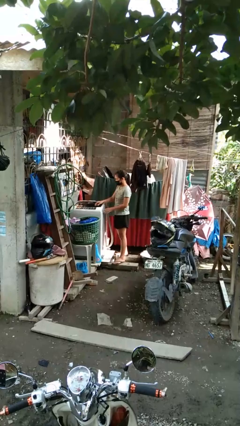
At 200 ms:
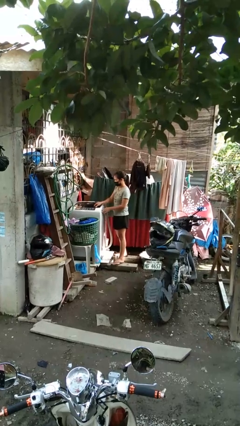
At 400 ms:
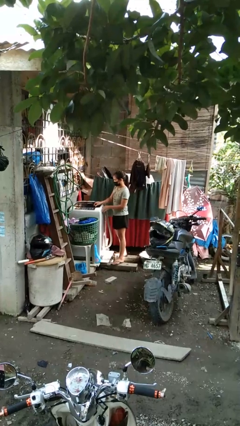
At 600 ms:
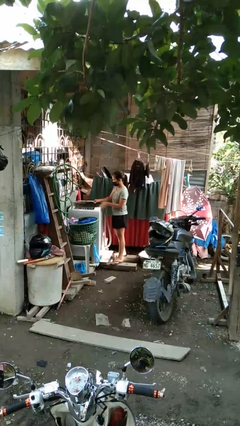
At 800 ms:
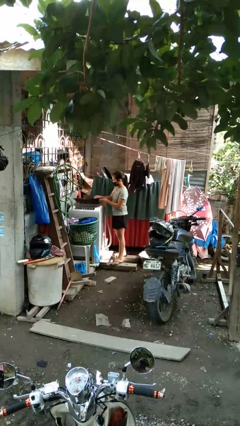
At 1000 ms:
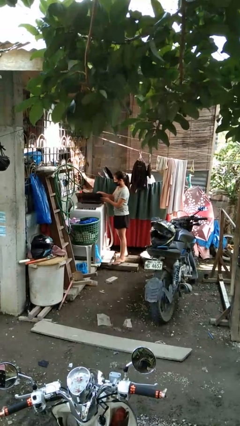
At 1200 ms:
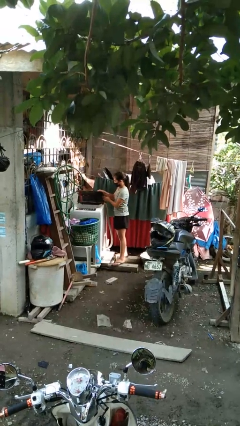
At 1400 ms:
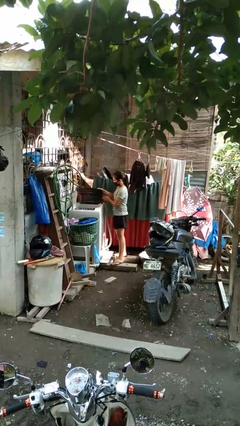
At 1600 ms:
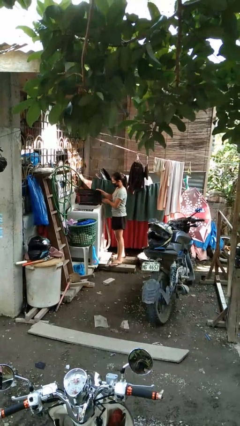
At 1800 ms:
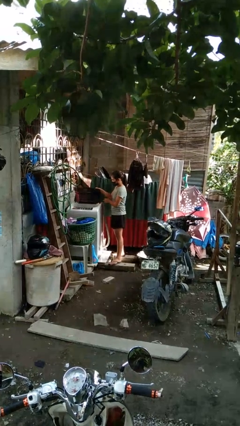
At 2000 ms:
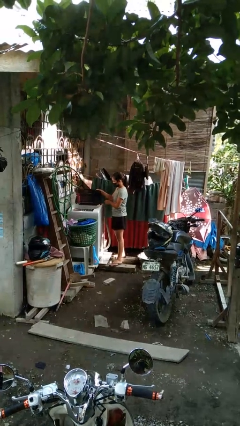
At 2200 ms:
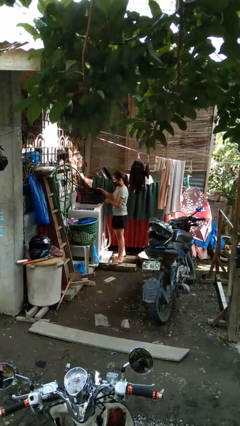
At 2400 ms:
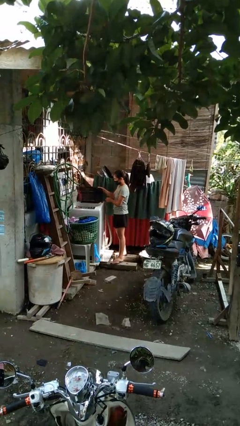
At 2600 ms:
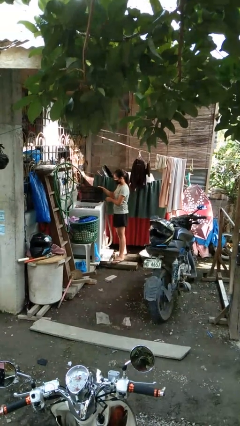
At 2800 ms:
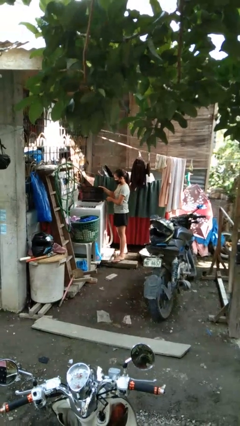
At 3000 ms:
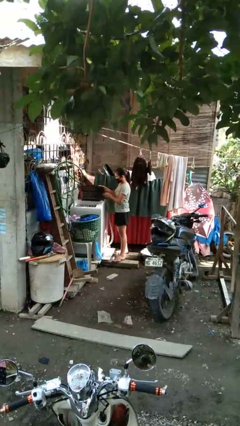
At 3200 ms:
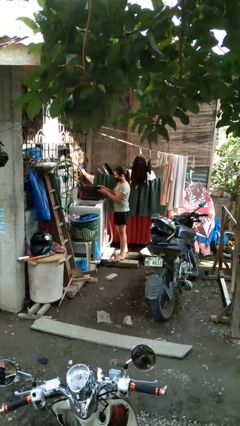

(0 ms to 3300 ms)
person opens clothes washer

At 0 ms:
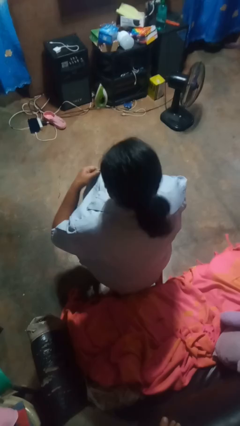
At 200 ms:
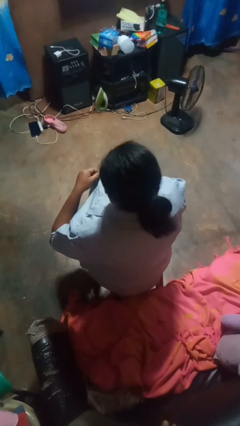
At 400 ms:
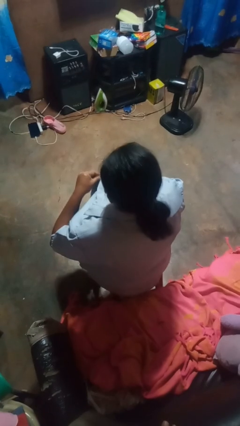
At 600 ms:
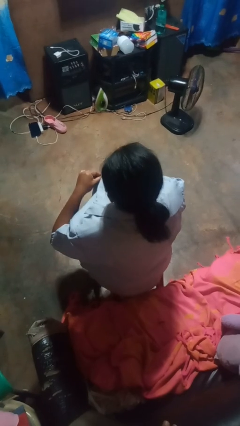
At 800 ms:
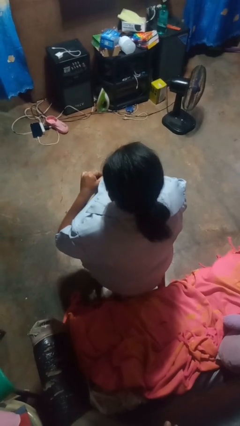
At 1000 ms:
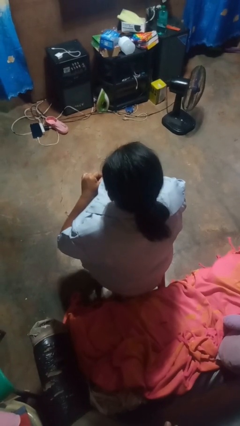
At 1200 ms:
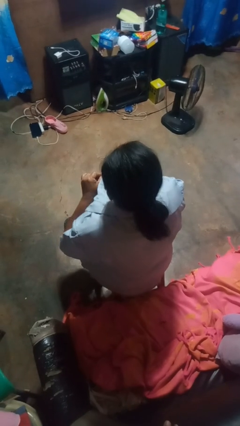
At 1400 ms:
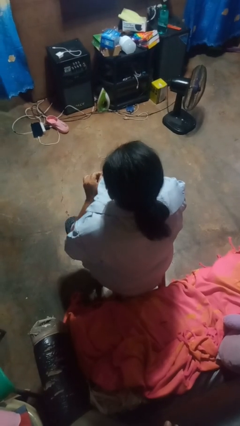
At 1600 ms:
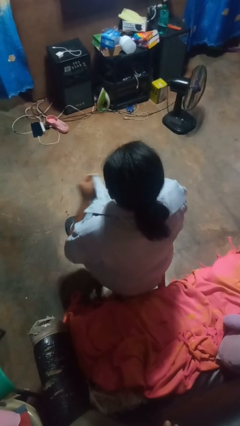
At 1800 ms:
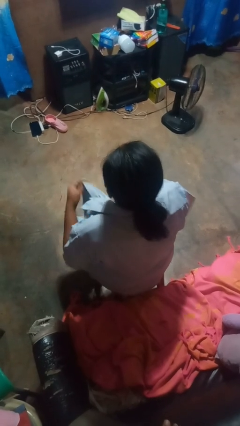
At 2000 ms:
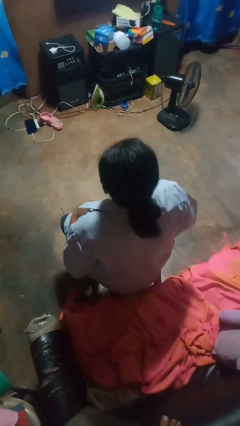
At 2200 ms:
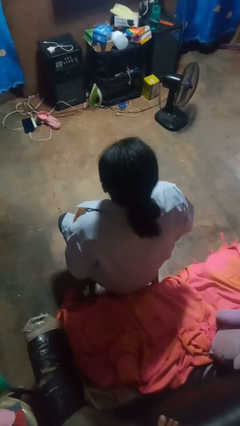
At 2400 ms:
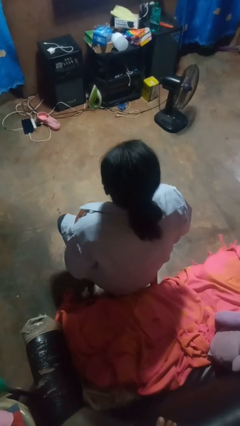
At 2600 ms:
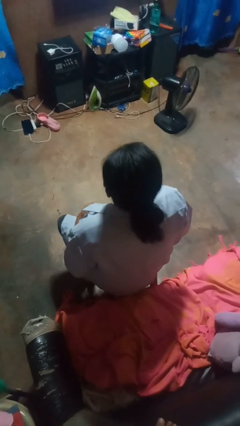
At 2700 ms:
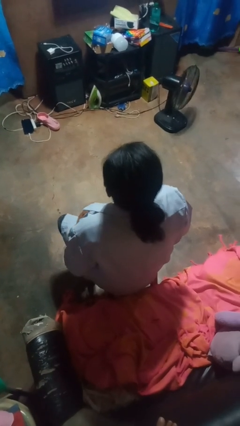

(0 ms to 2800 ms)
person unbuttons shirt

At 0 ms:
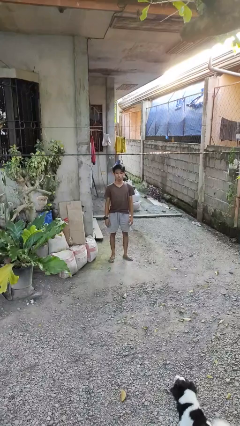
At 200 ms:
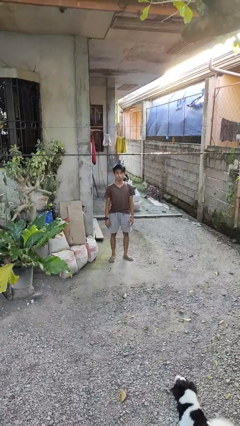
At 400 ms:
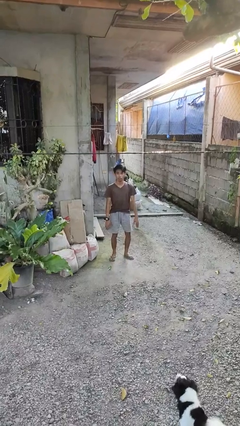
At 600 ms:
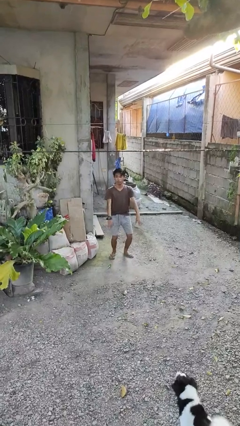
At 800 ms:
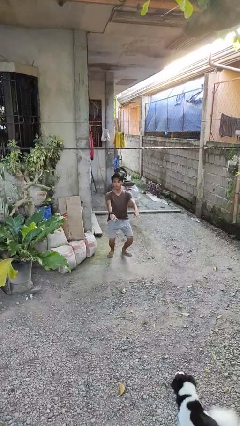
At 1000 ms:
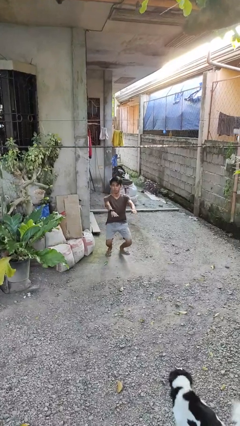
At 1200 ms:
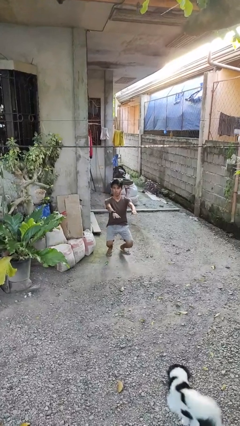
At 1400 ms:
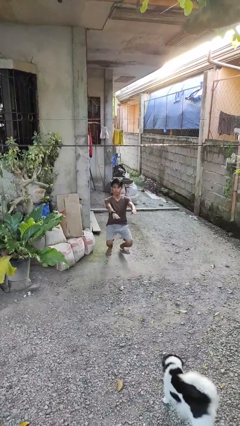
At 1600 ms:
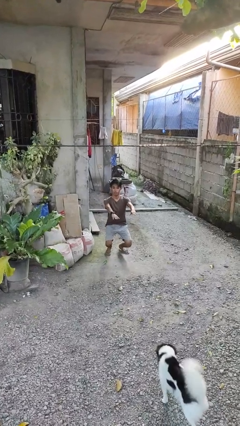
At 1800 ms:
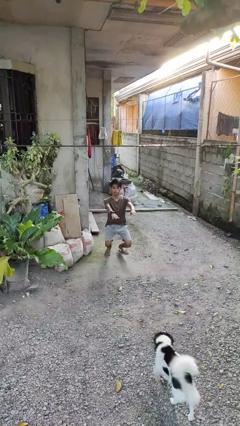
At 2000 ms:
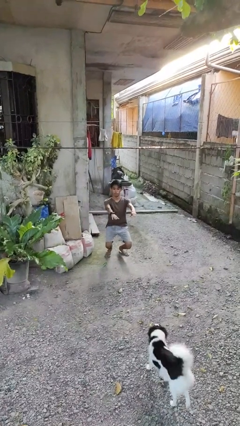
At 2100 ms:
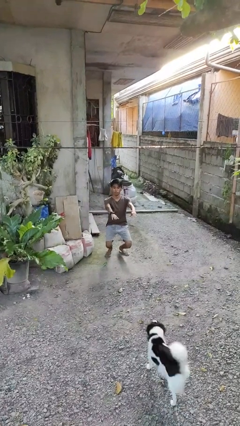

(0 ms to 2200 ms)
person squats

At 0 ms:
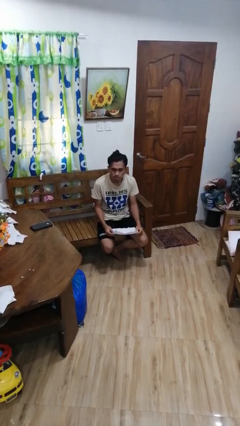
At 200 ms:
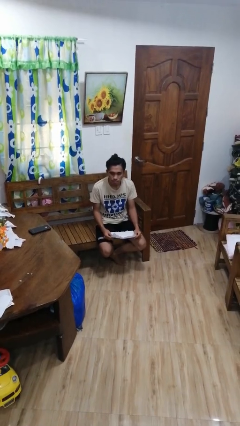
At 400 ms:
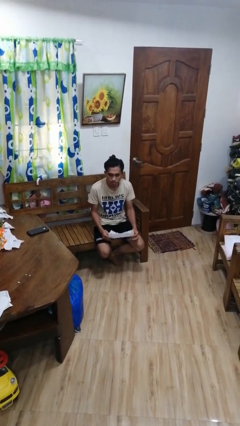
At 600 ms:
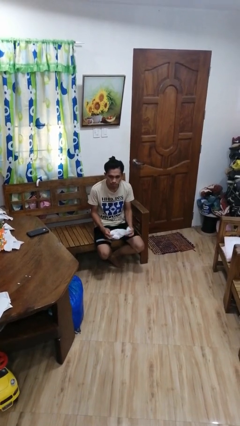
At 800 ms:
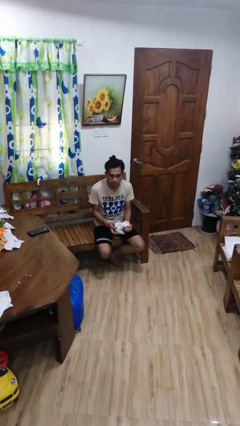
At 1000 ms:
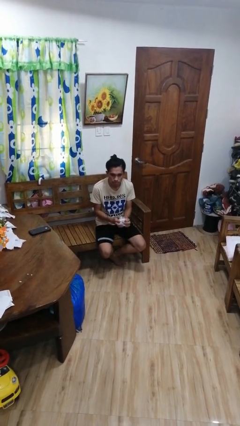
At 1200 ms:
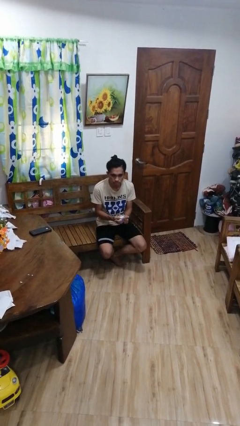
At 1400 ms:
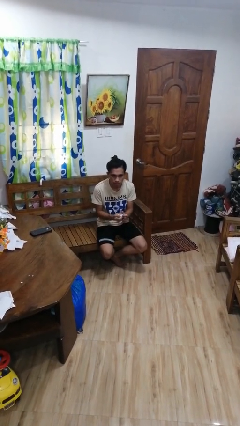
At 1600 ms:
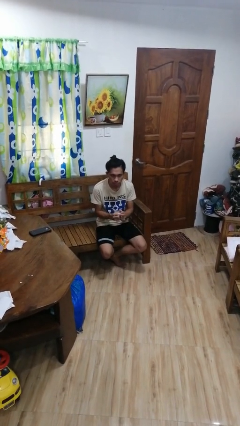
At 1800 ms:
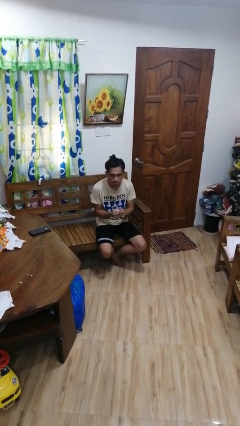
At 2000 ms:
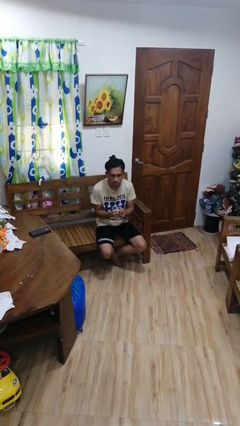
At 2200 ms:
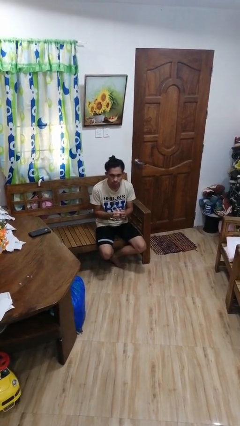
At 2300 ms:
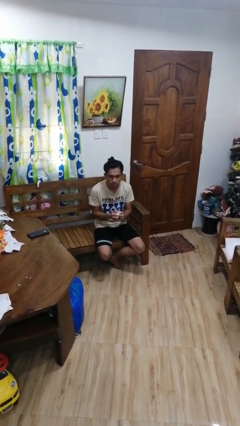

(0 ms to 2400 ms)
person crumples paper

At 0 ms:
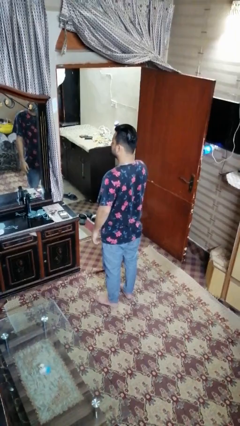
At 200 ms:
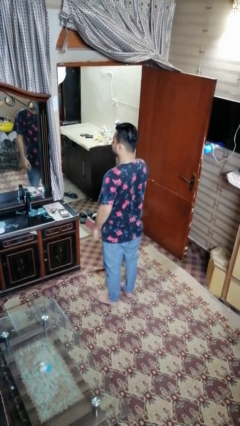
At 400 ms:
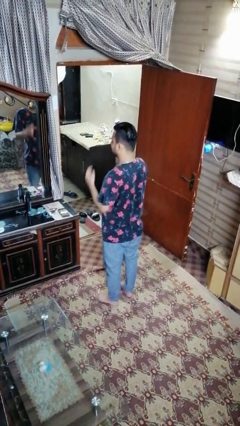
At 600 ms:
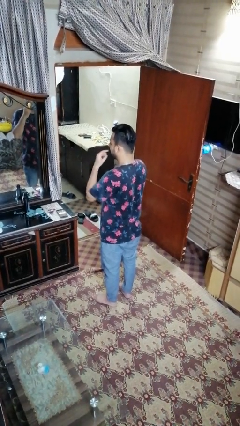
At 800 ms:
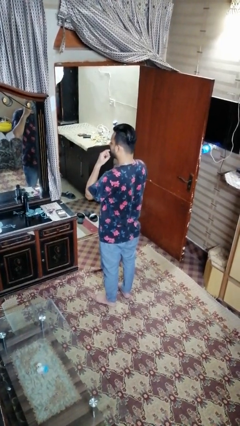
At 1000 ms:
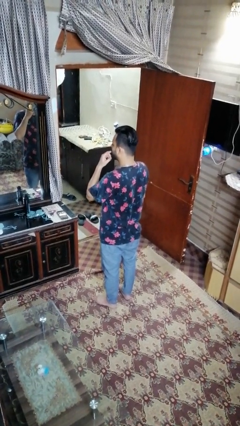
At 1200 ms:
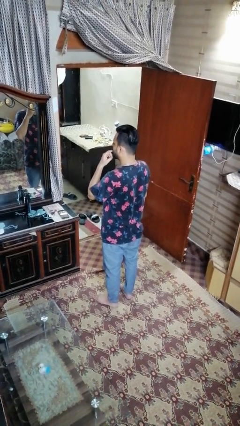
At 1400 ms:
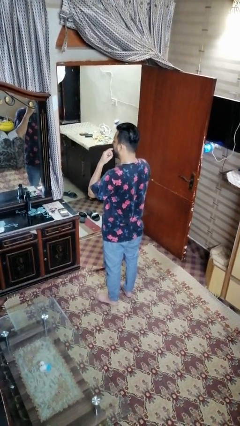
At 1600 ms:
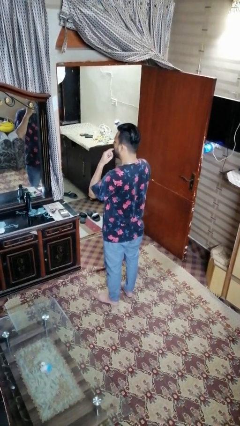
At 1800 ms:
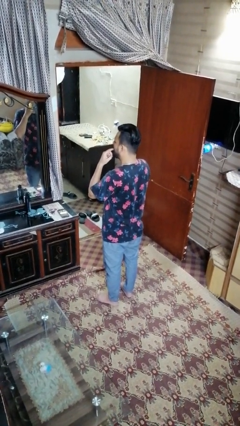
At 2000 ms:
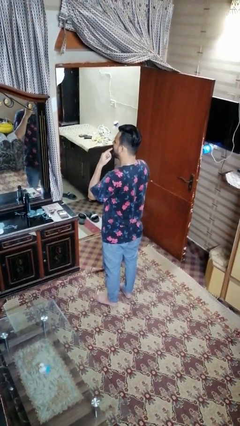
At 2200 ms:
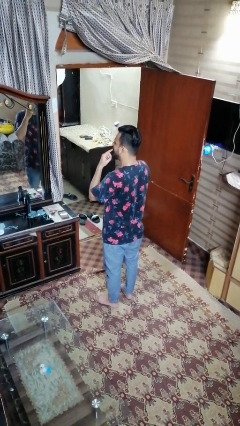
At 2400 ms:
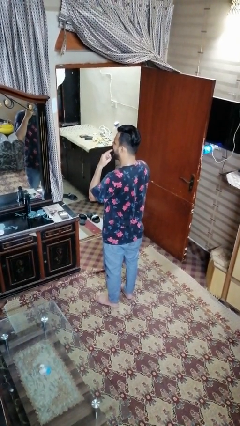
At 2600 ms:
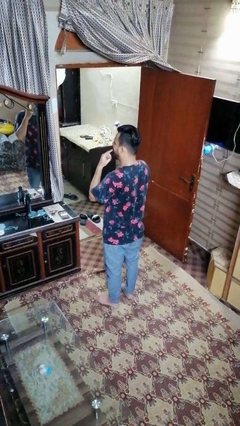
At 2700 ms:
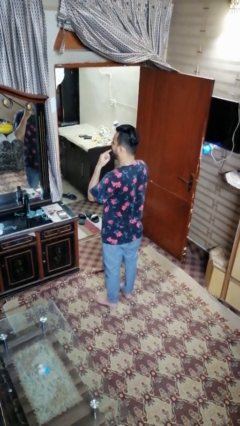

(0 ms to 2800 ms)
person licks fingers

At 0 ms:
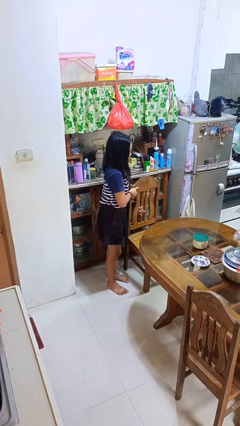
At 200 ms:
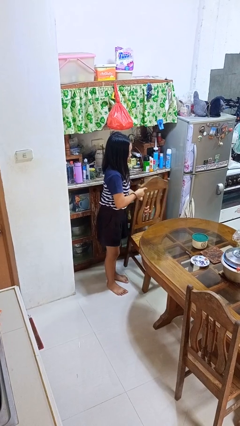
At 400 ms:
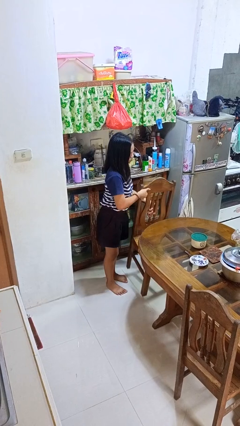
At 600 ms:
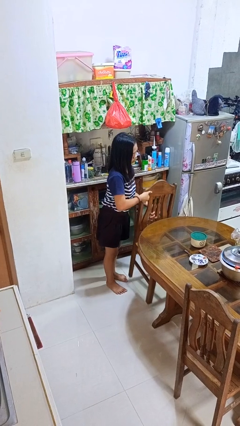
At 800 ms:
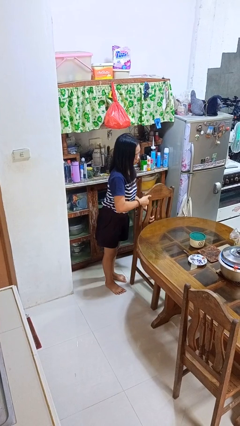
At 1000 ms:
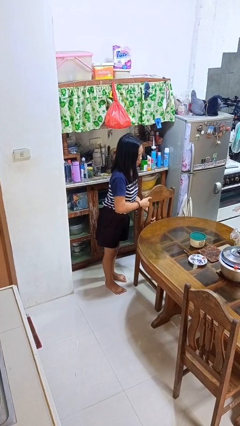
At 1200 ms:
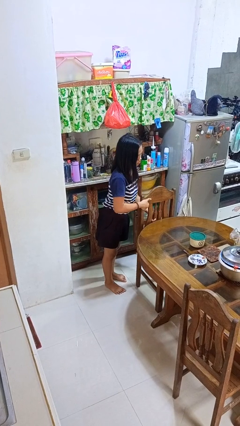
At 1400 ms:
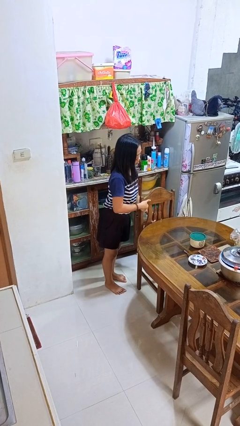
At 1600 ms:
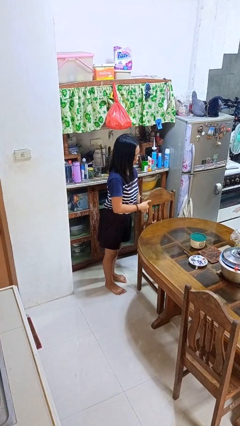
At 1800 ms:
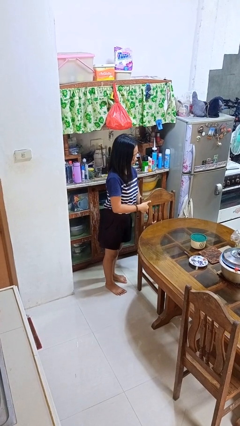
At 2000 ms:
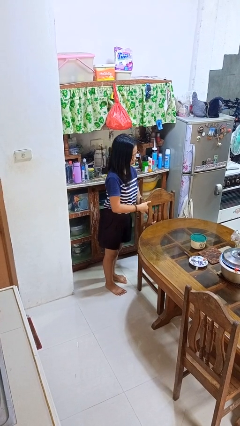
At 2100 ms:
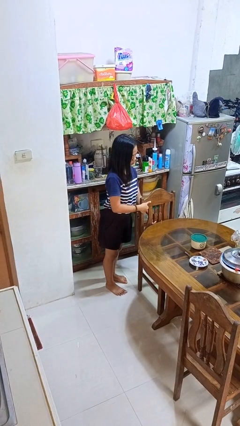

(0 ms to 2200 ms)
person pushes in chair

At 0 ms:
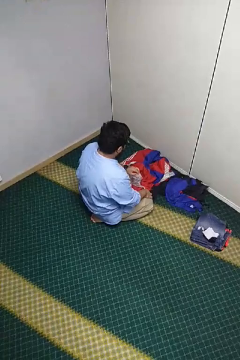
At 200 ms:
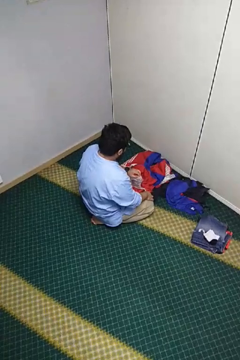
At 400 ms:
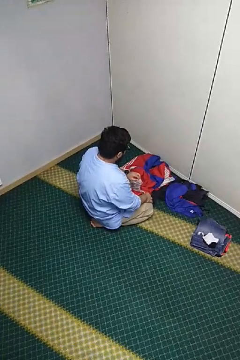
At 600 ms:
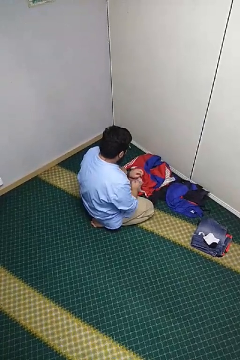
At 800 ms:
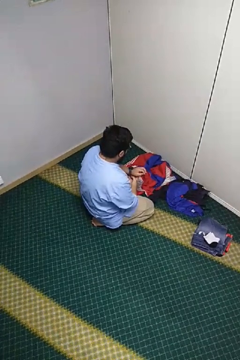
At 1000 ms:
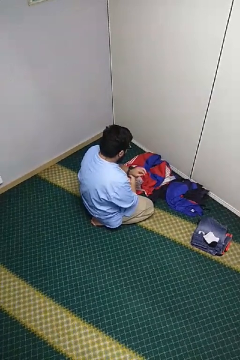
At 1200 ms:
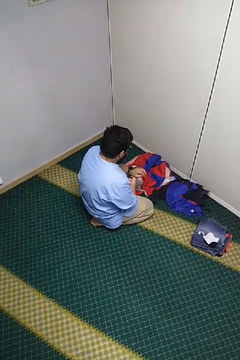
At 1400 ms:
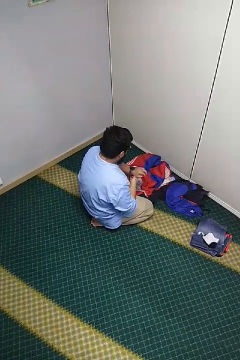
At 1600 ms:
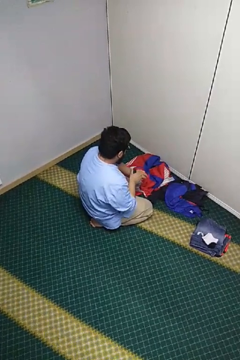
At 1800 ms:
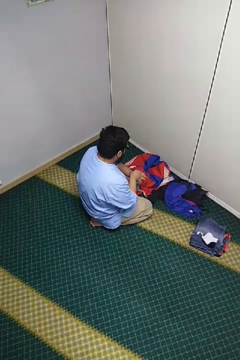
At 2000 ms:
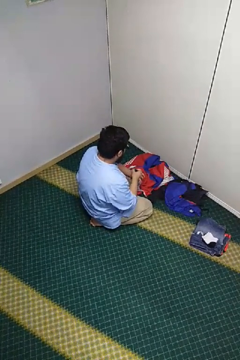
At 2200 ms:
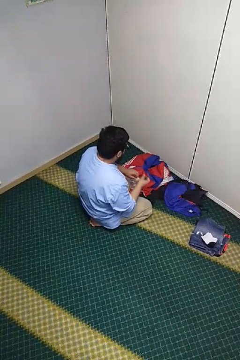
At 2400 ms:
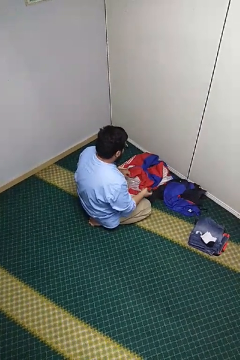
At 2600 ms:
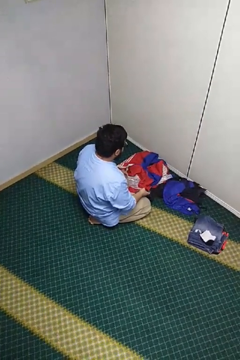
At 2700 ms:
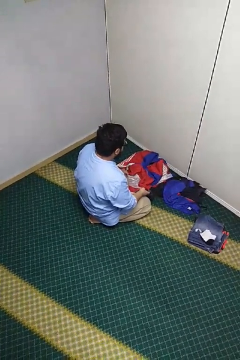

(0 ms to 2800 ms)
person takes off wristwatch
